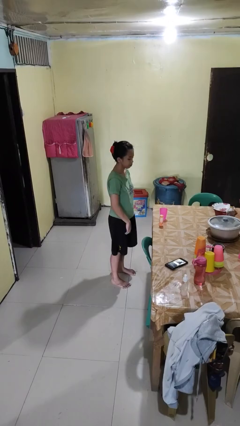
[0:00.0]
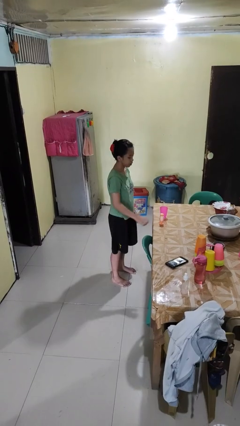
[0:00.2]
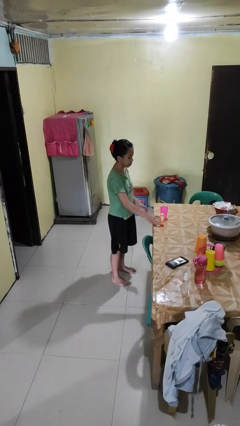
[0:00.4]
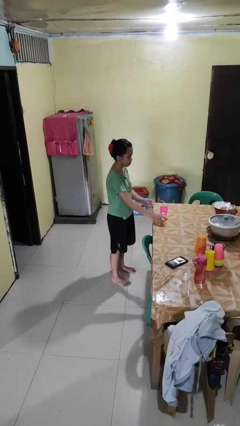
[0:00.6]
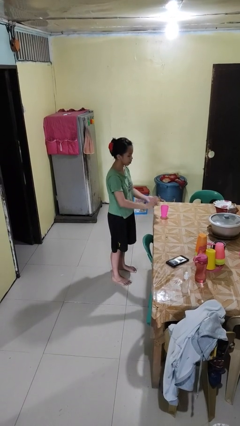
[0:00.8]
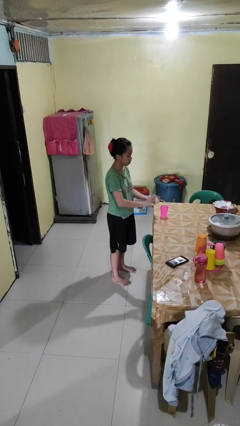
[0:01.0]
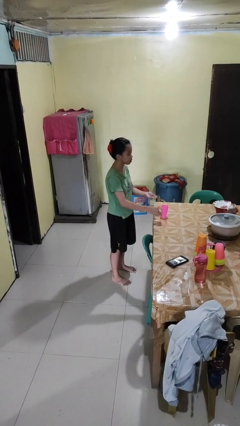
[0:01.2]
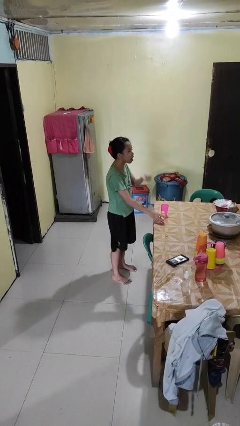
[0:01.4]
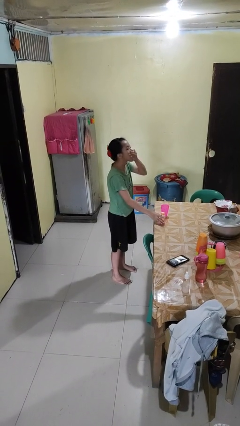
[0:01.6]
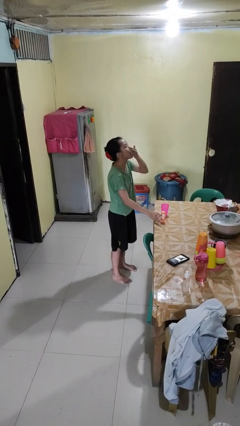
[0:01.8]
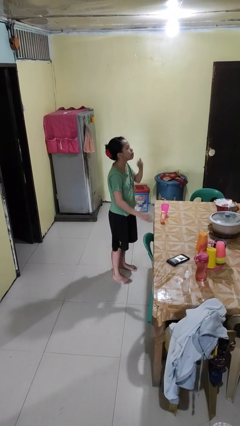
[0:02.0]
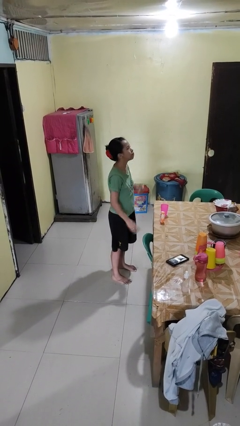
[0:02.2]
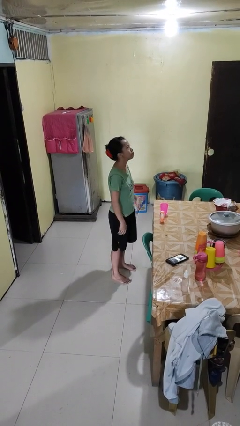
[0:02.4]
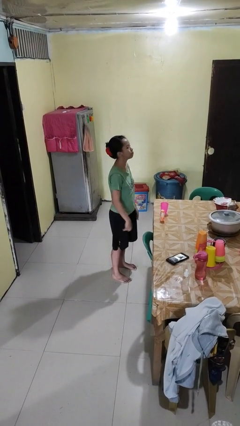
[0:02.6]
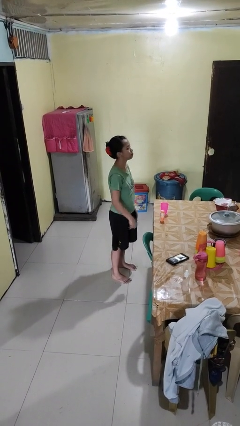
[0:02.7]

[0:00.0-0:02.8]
person takes medicine pills

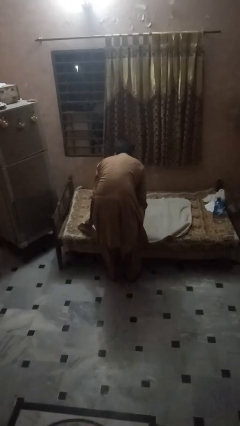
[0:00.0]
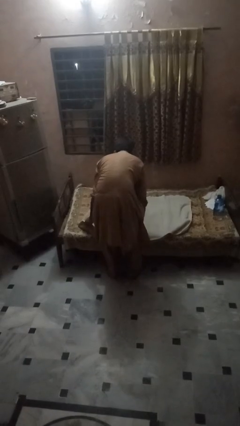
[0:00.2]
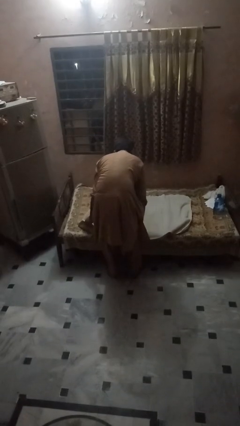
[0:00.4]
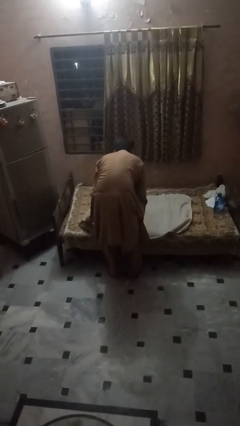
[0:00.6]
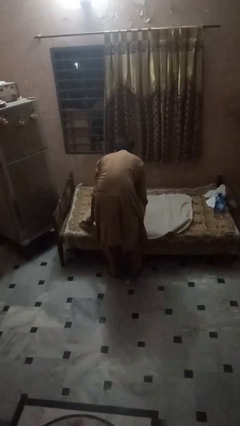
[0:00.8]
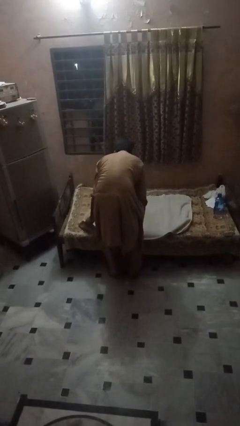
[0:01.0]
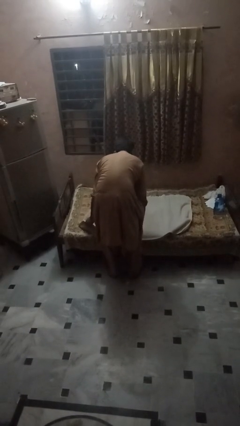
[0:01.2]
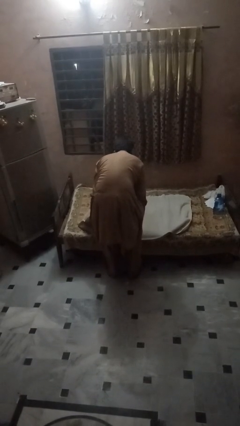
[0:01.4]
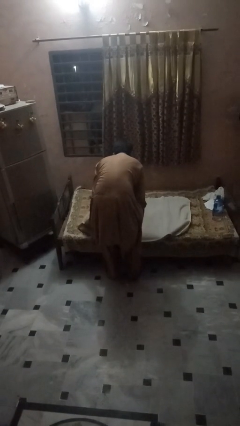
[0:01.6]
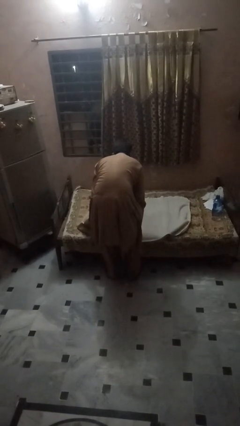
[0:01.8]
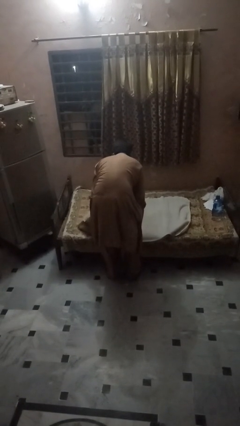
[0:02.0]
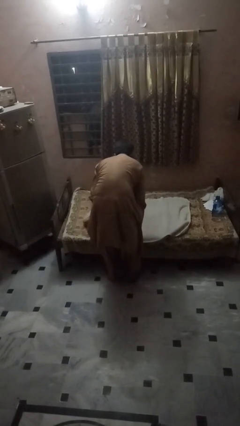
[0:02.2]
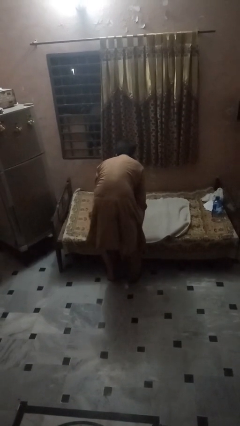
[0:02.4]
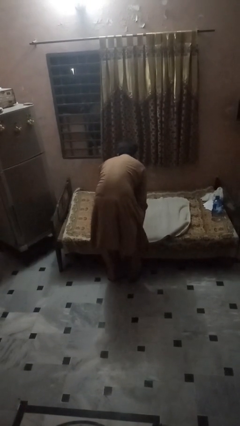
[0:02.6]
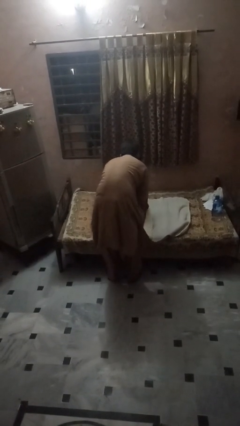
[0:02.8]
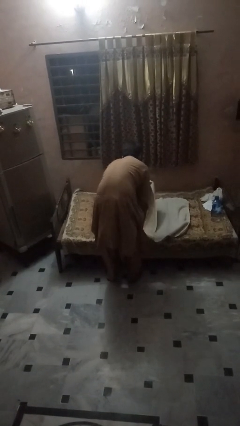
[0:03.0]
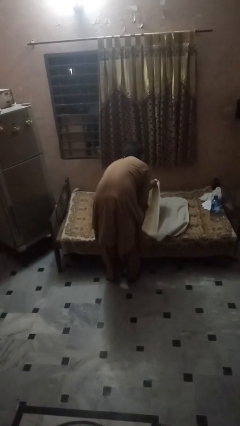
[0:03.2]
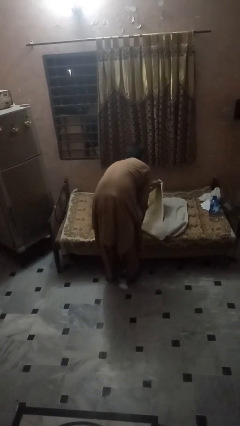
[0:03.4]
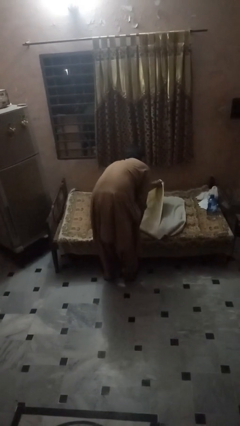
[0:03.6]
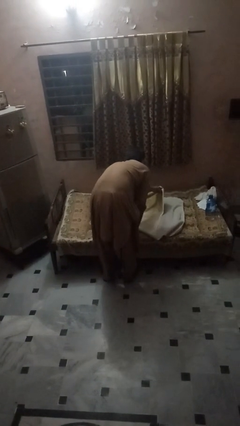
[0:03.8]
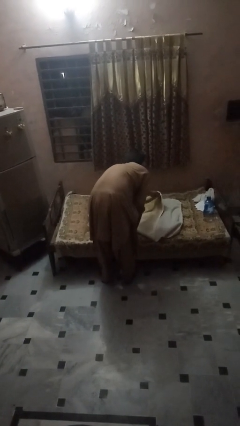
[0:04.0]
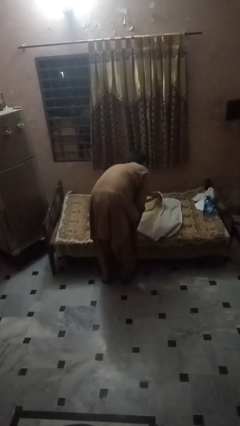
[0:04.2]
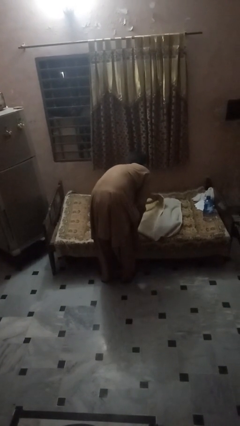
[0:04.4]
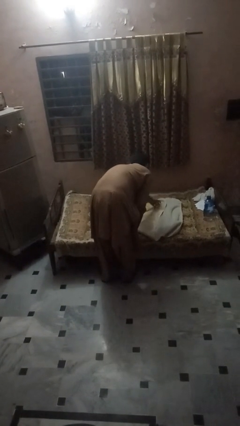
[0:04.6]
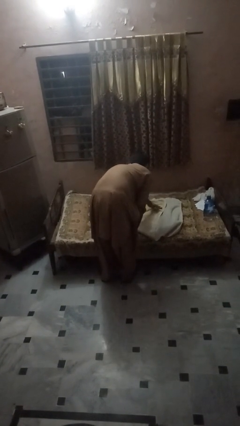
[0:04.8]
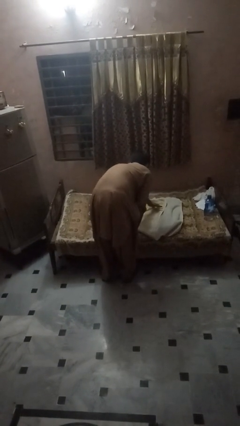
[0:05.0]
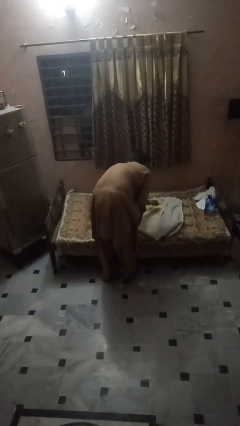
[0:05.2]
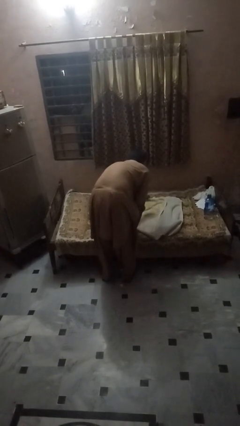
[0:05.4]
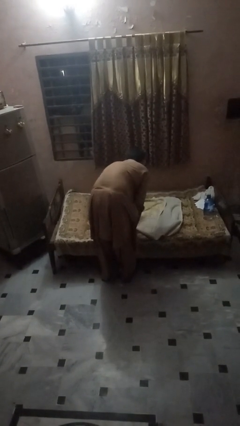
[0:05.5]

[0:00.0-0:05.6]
person folds blanket

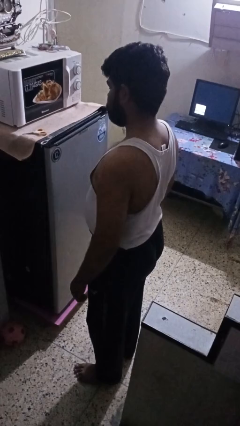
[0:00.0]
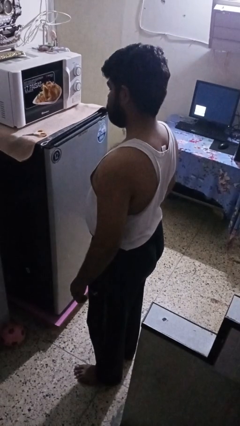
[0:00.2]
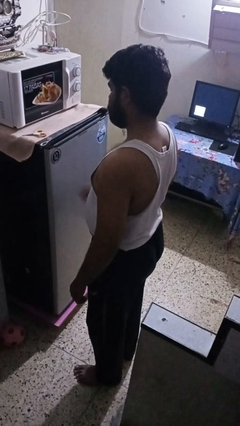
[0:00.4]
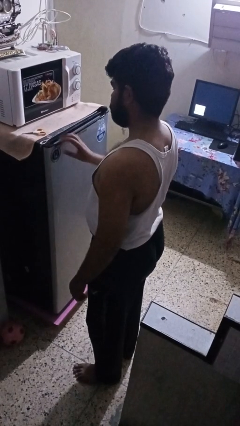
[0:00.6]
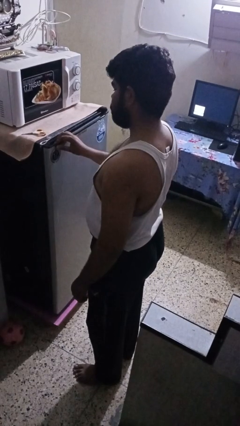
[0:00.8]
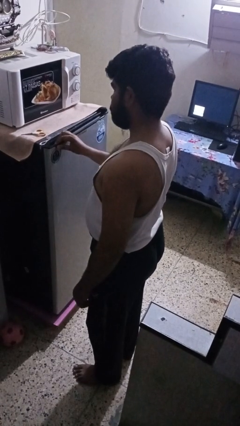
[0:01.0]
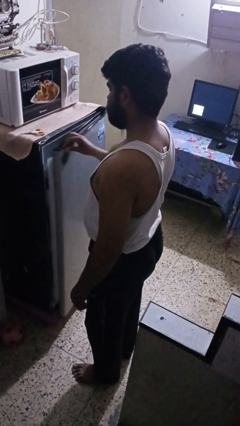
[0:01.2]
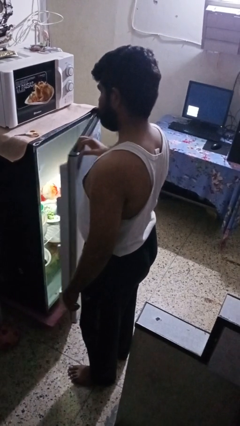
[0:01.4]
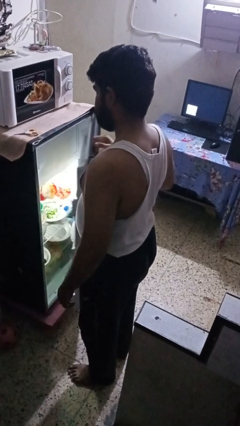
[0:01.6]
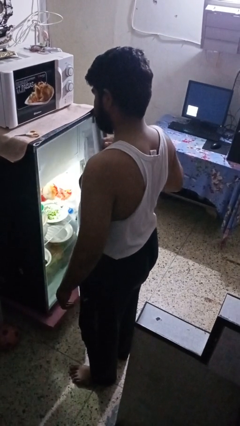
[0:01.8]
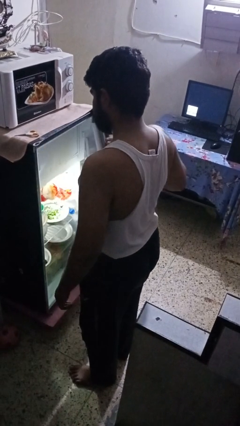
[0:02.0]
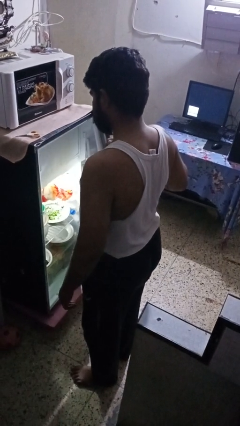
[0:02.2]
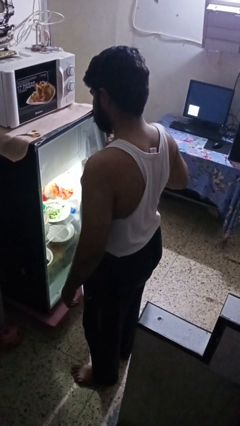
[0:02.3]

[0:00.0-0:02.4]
person opens refrigerator

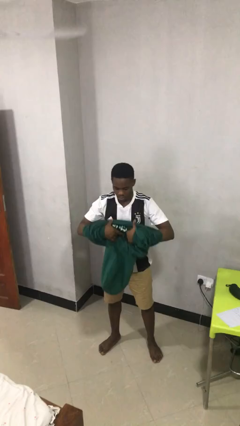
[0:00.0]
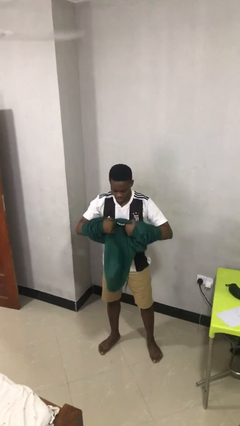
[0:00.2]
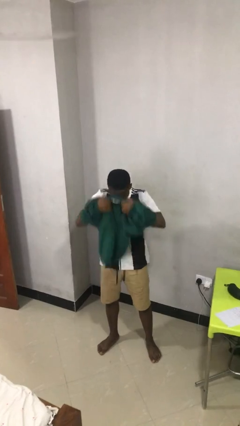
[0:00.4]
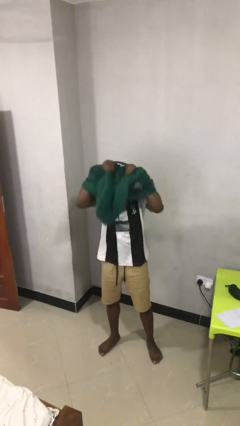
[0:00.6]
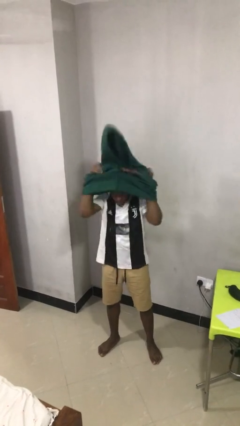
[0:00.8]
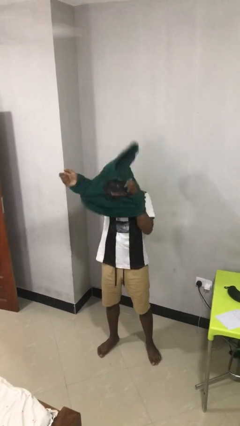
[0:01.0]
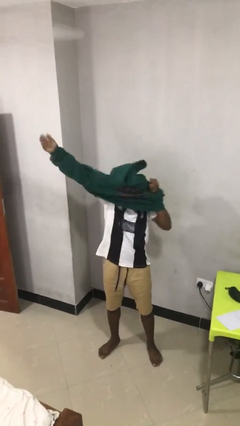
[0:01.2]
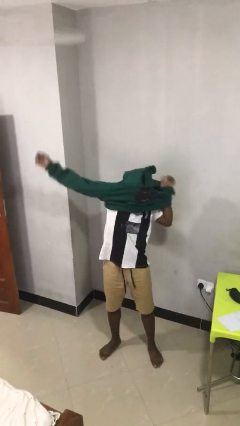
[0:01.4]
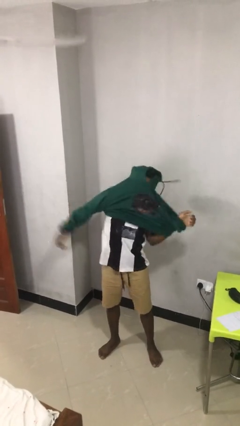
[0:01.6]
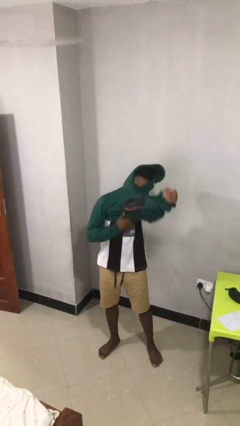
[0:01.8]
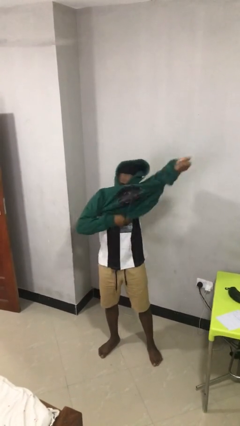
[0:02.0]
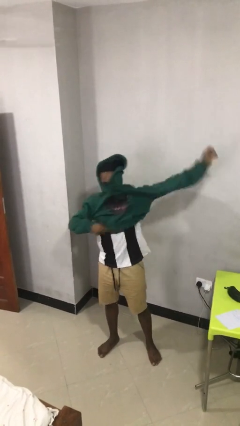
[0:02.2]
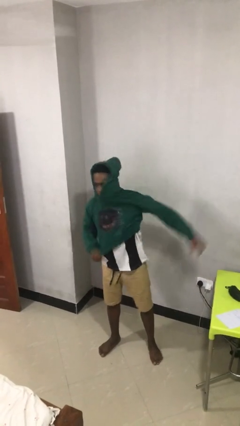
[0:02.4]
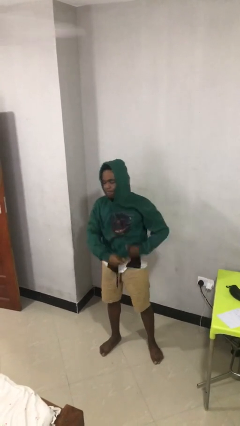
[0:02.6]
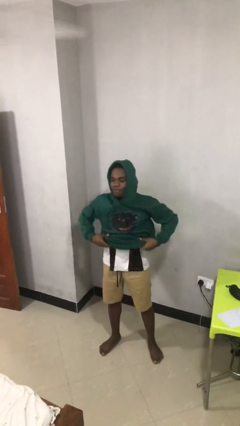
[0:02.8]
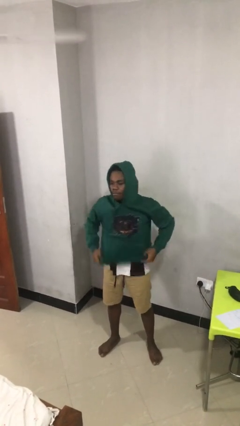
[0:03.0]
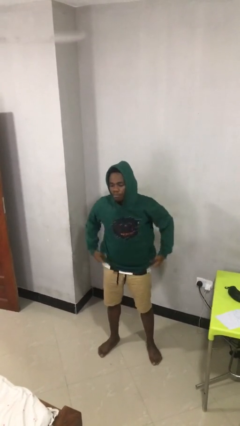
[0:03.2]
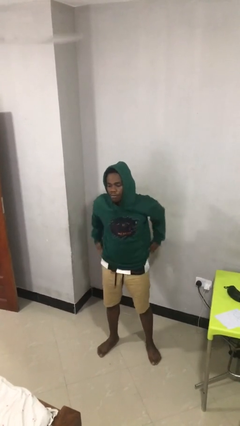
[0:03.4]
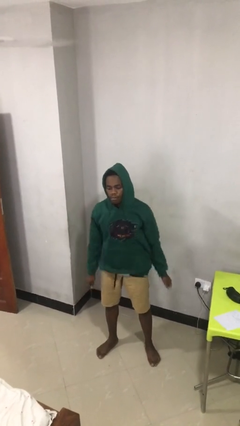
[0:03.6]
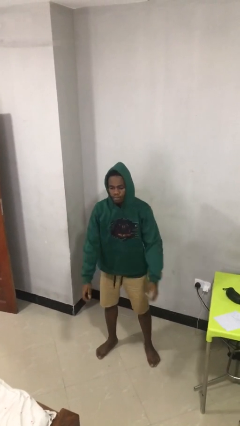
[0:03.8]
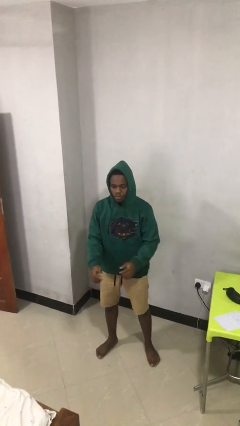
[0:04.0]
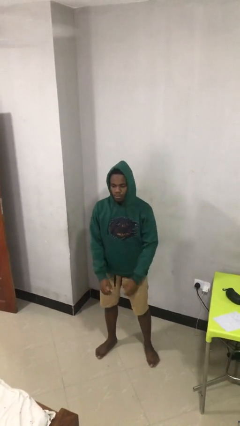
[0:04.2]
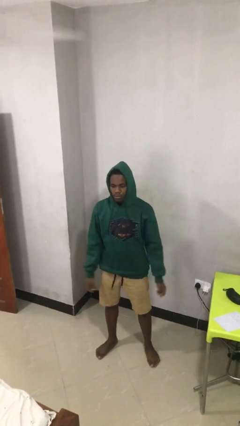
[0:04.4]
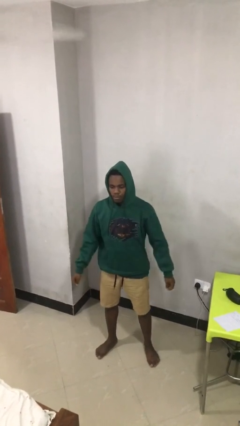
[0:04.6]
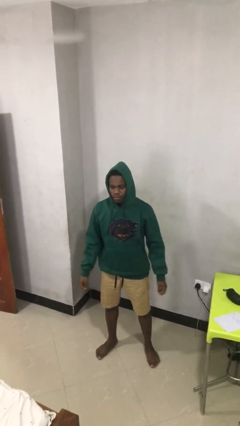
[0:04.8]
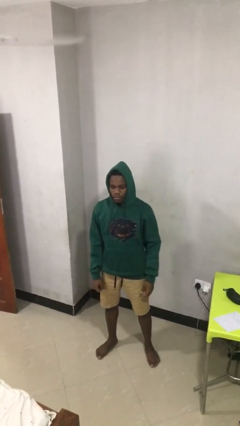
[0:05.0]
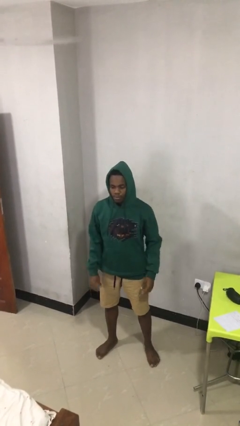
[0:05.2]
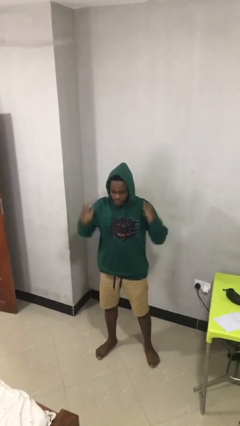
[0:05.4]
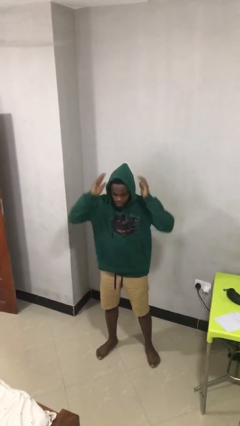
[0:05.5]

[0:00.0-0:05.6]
person puts on hoodie

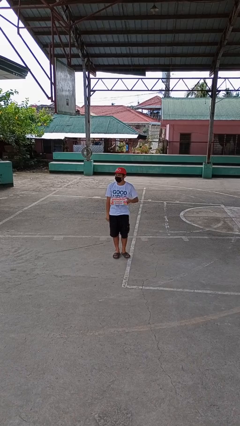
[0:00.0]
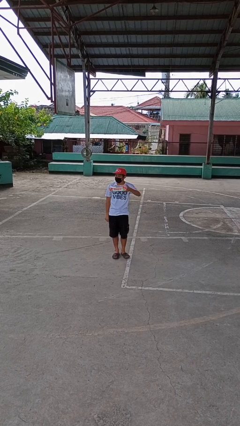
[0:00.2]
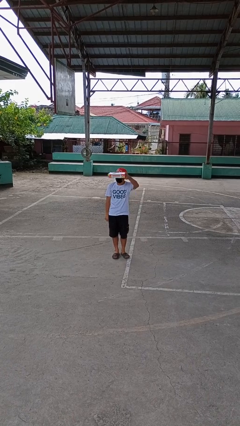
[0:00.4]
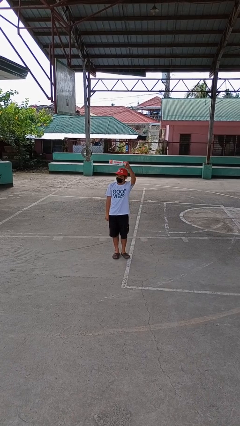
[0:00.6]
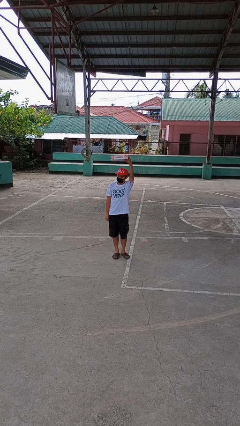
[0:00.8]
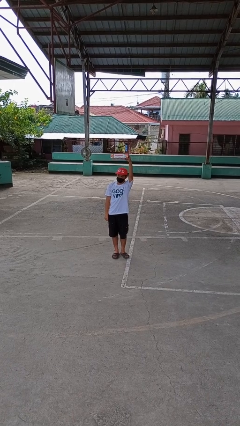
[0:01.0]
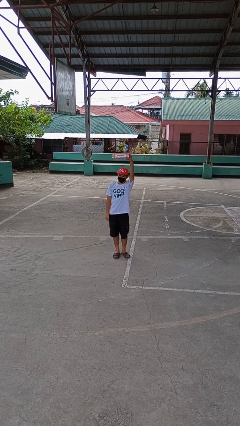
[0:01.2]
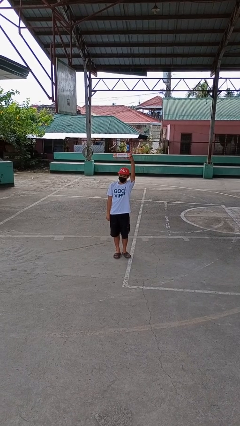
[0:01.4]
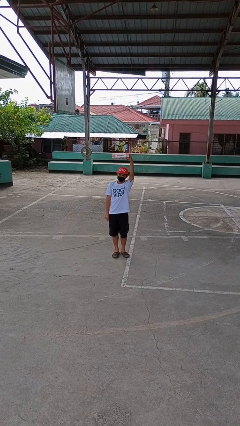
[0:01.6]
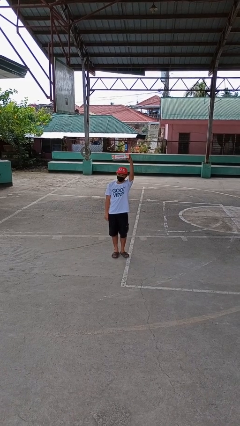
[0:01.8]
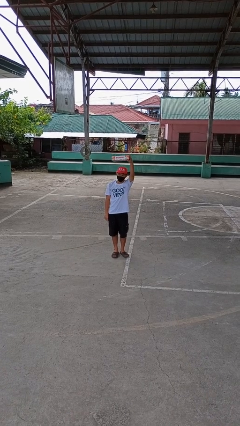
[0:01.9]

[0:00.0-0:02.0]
person holds object above head
